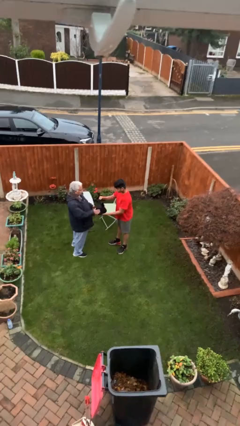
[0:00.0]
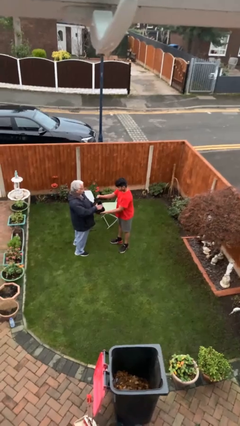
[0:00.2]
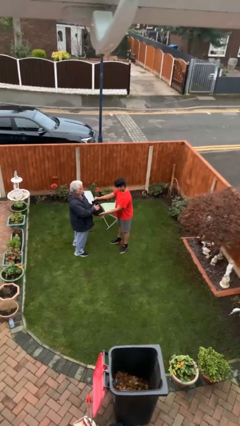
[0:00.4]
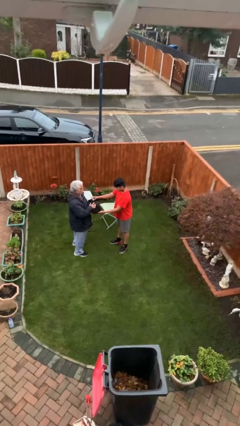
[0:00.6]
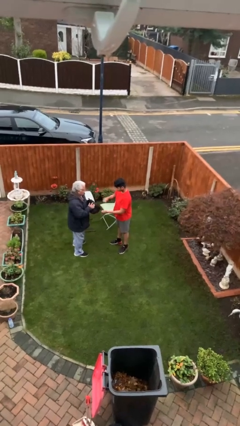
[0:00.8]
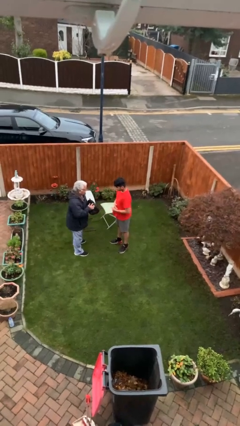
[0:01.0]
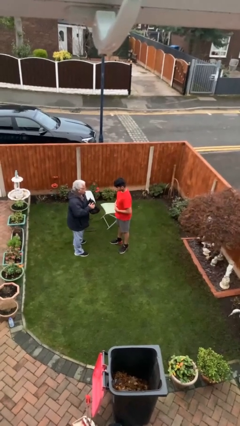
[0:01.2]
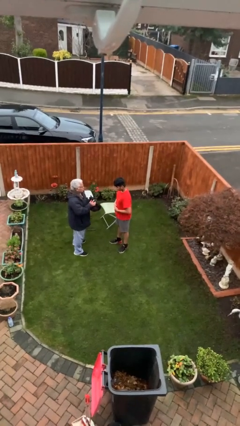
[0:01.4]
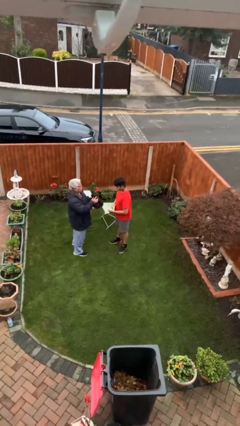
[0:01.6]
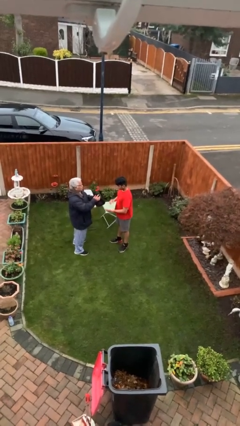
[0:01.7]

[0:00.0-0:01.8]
person transfers object to person

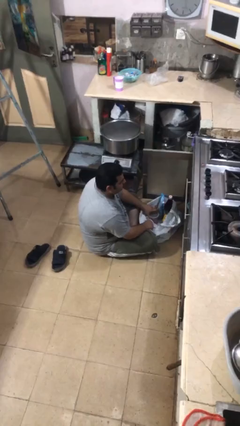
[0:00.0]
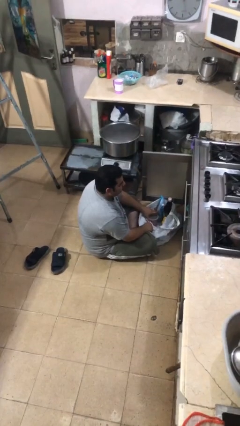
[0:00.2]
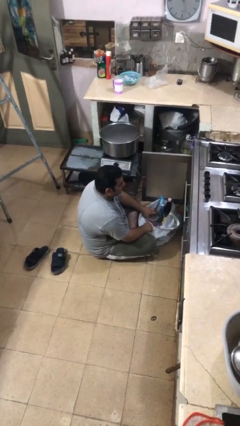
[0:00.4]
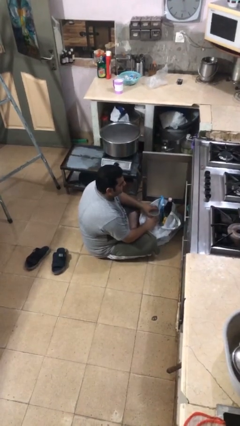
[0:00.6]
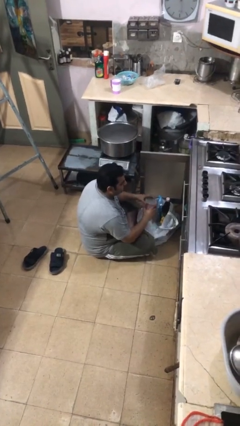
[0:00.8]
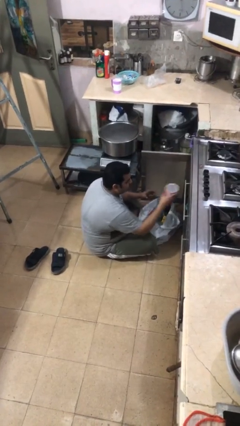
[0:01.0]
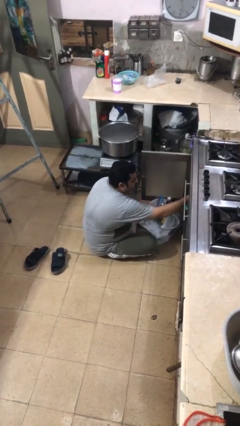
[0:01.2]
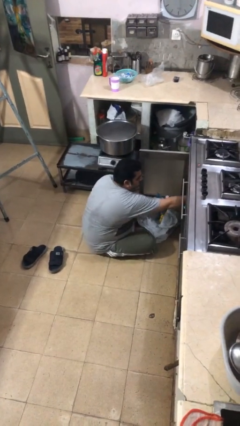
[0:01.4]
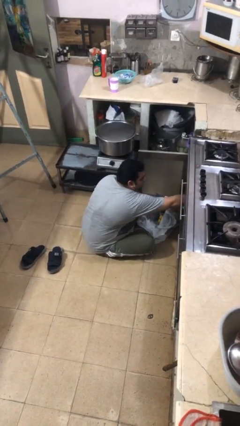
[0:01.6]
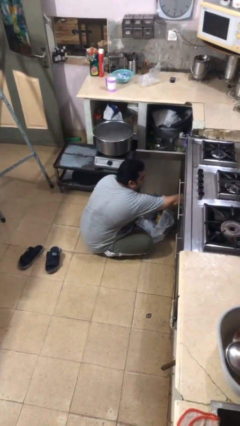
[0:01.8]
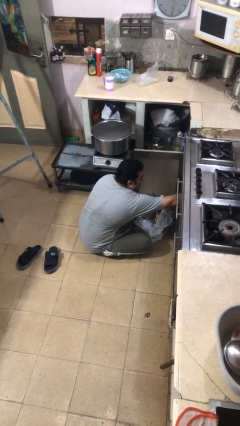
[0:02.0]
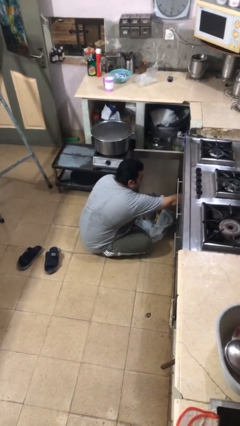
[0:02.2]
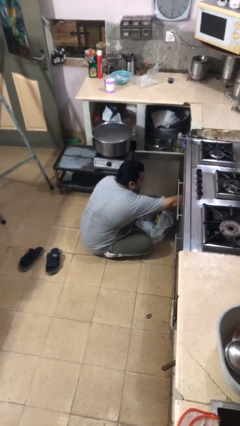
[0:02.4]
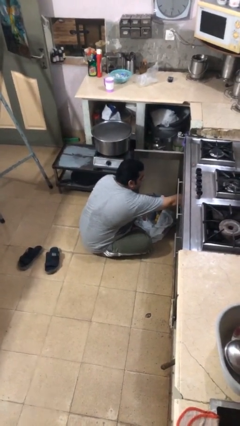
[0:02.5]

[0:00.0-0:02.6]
person loads groceries into cabinet

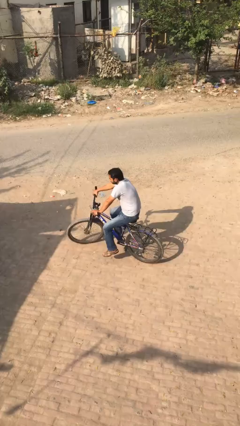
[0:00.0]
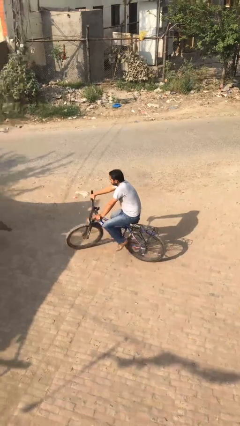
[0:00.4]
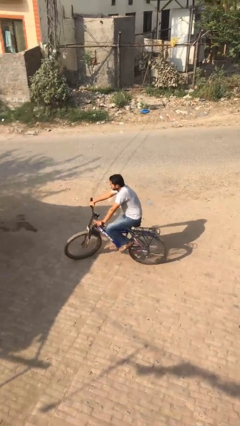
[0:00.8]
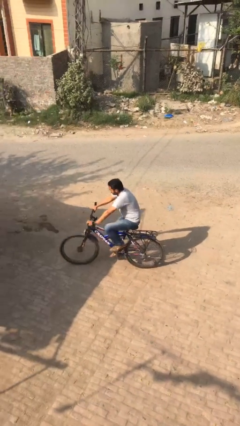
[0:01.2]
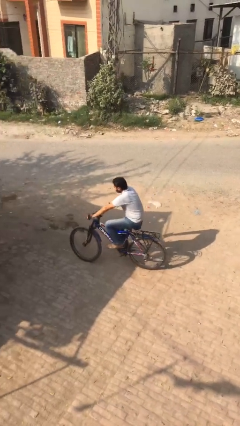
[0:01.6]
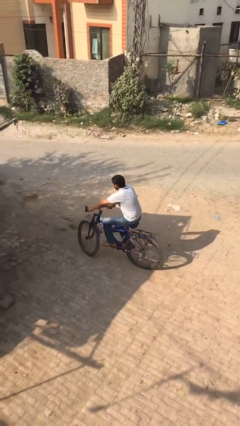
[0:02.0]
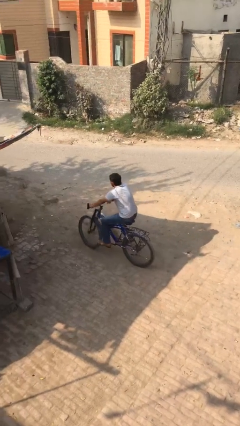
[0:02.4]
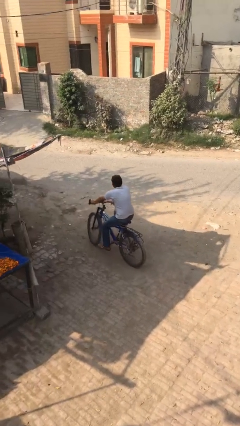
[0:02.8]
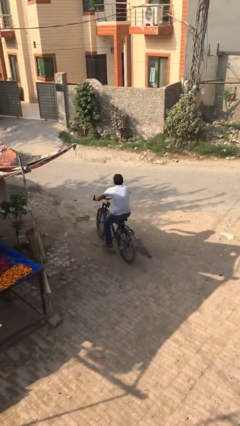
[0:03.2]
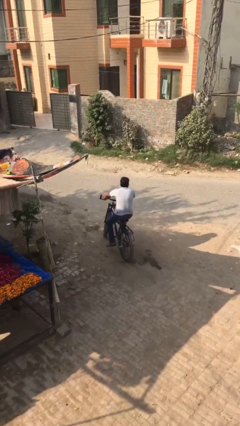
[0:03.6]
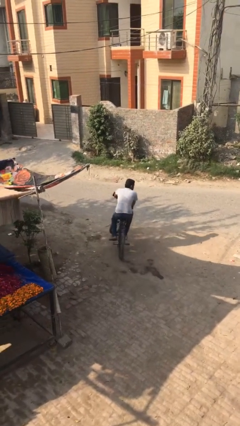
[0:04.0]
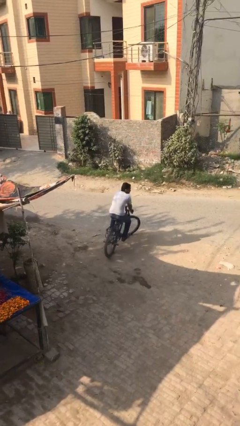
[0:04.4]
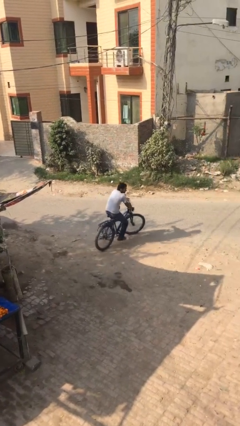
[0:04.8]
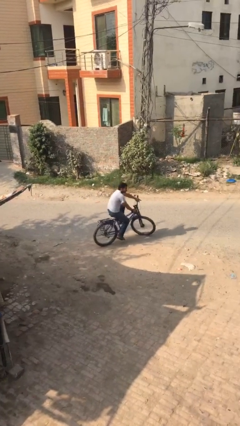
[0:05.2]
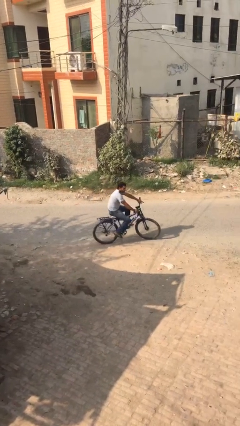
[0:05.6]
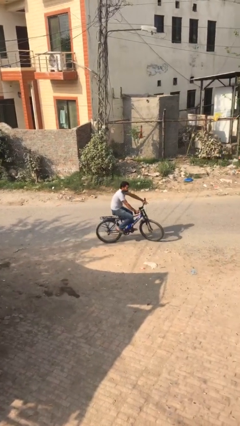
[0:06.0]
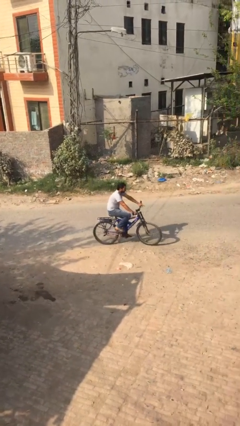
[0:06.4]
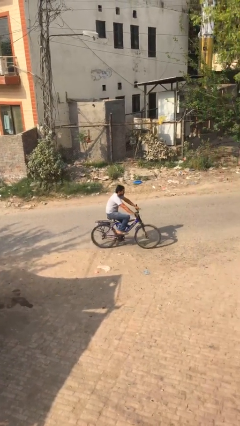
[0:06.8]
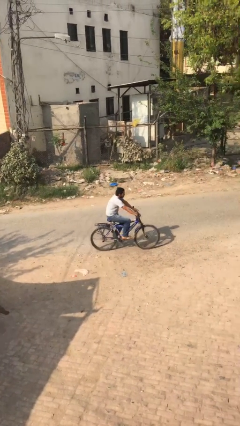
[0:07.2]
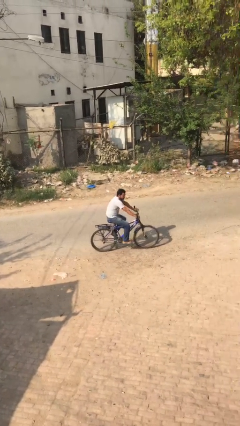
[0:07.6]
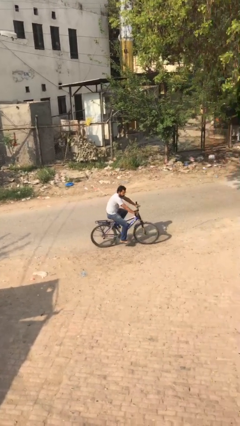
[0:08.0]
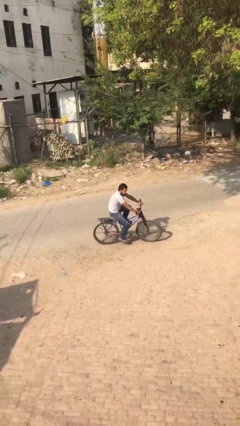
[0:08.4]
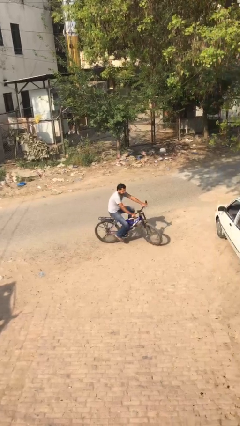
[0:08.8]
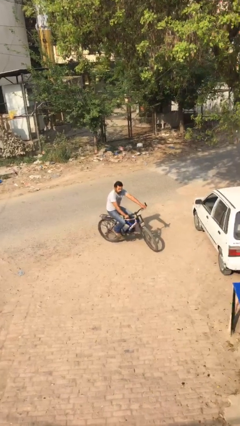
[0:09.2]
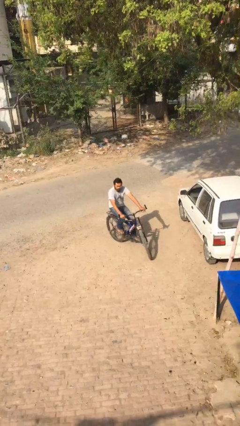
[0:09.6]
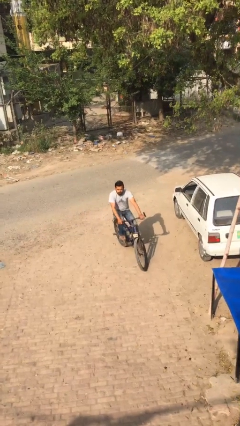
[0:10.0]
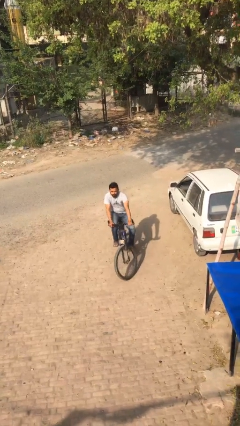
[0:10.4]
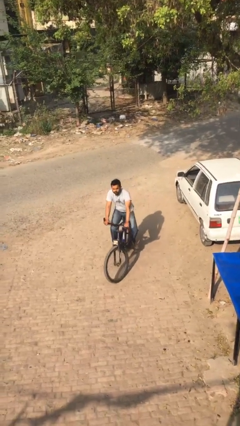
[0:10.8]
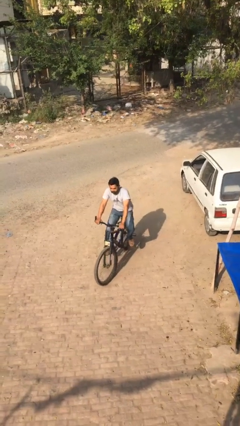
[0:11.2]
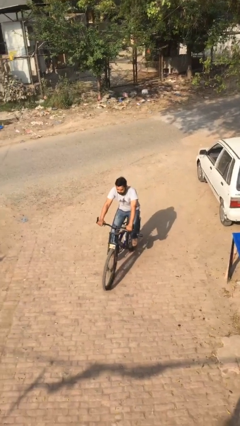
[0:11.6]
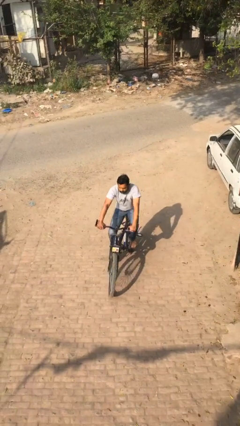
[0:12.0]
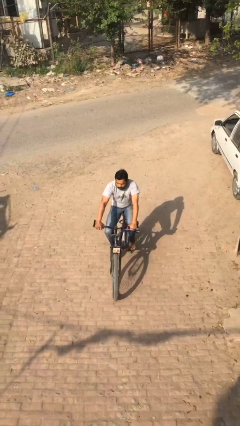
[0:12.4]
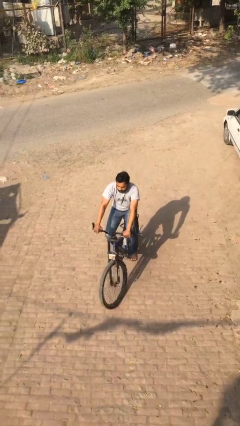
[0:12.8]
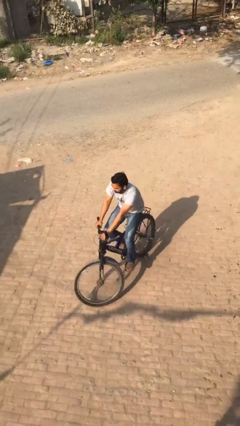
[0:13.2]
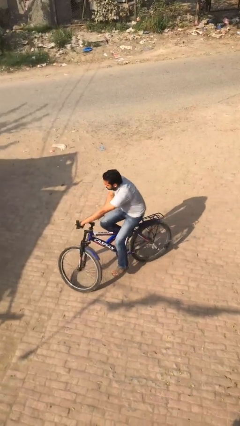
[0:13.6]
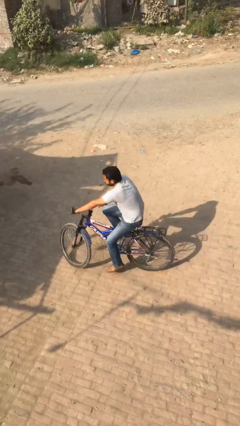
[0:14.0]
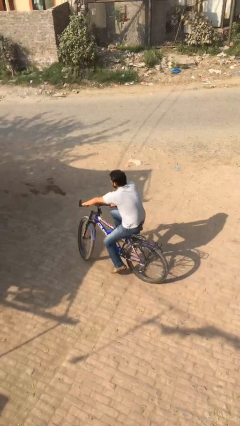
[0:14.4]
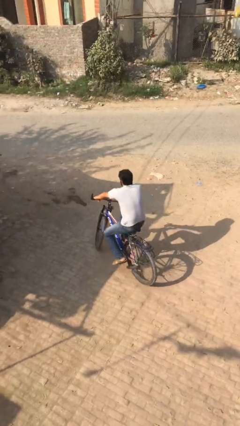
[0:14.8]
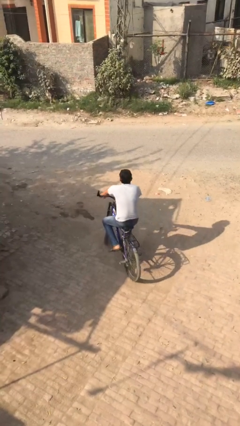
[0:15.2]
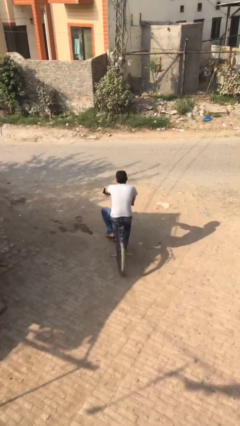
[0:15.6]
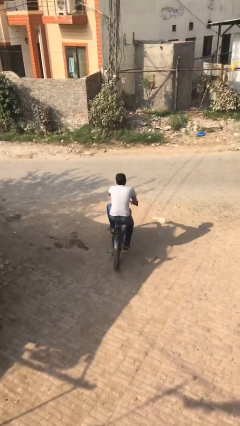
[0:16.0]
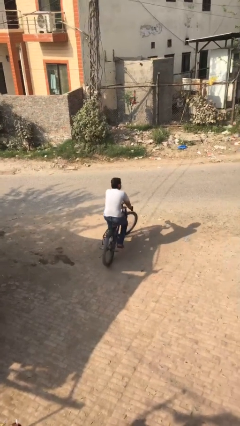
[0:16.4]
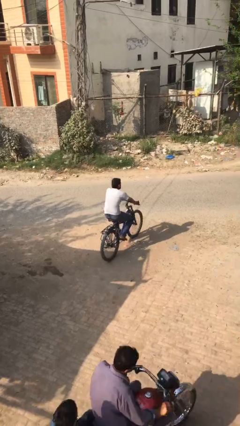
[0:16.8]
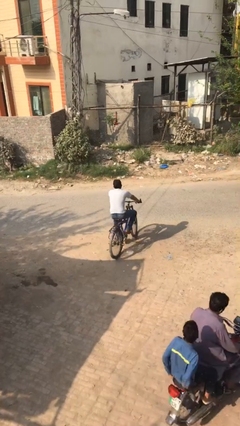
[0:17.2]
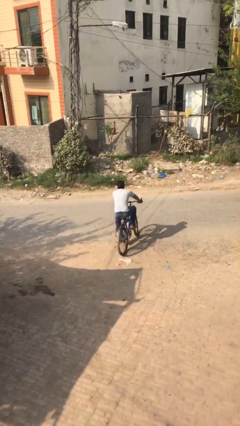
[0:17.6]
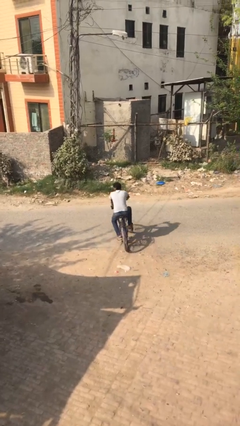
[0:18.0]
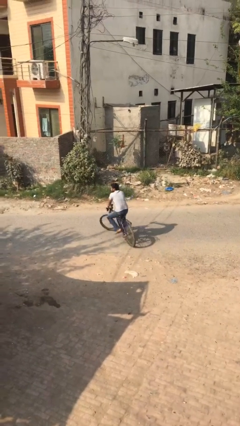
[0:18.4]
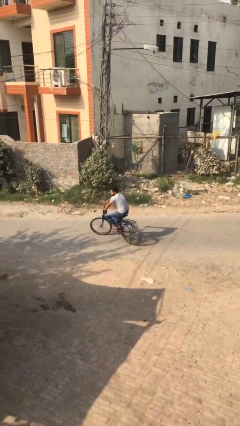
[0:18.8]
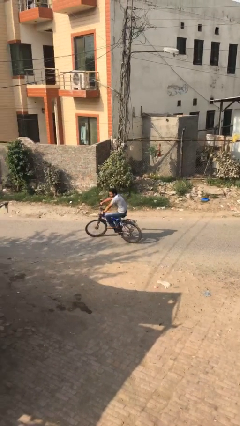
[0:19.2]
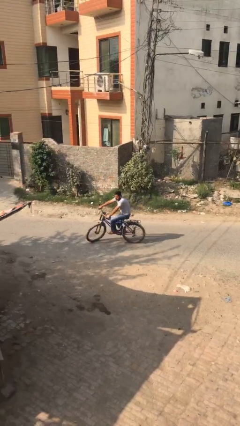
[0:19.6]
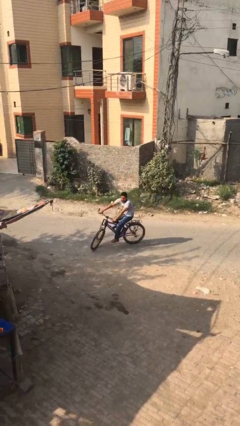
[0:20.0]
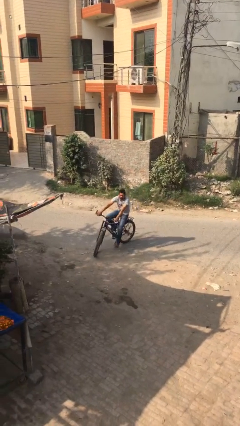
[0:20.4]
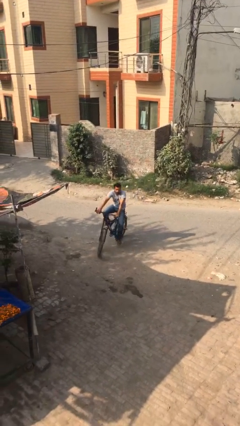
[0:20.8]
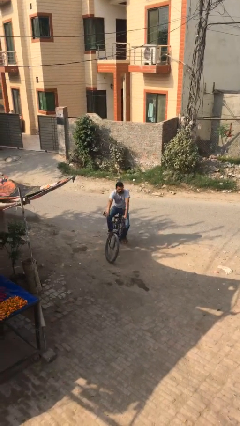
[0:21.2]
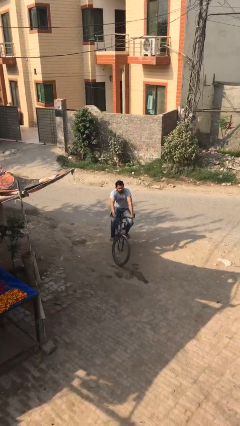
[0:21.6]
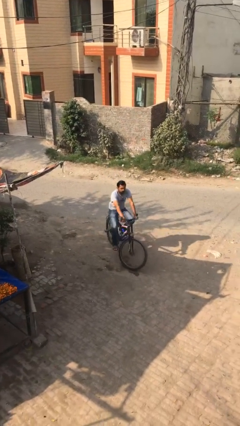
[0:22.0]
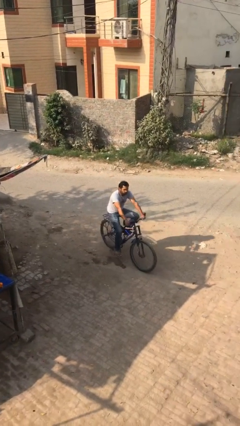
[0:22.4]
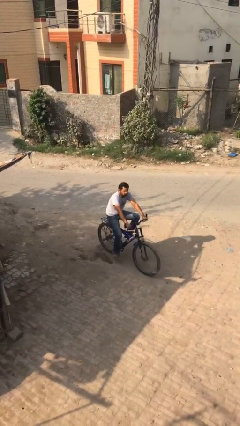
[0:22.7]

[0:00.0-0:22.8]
person rides bicycle

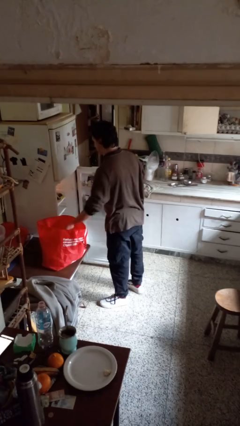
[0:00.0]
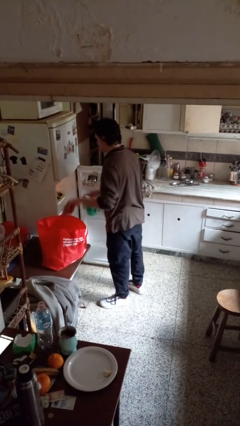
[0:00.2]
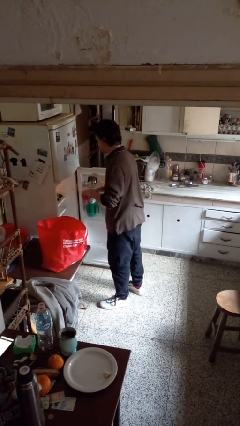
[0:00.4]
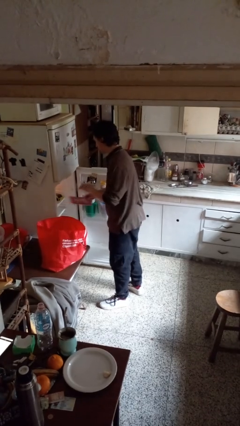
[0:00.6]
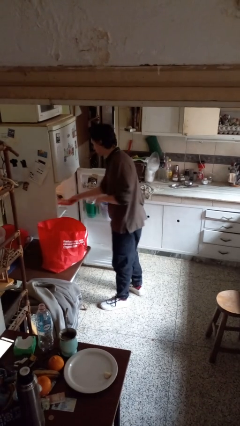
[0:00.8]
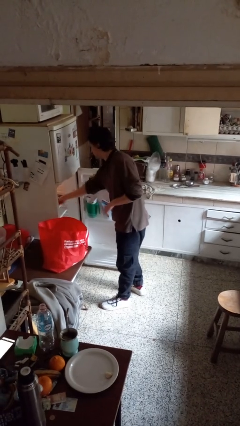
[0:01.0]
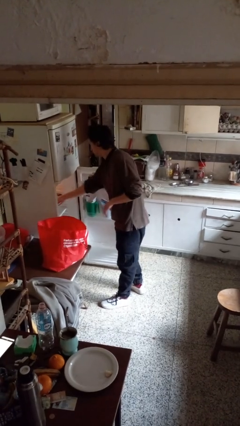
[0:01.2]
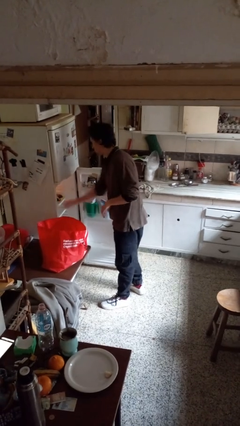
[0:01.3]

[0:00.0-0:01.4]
person loads groceries into refrigerator

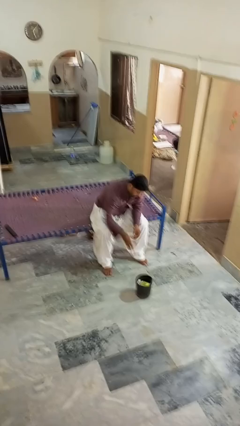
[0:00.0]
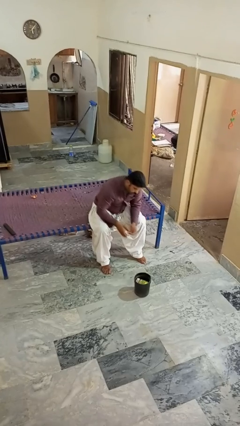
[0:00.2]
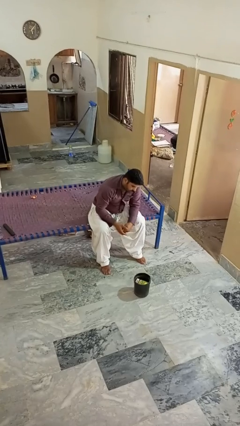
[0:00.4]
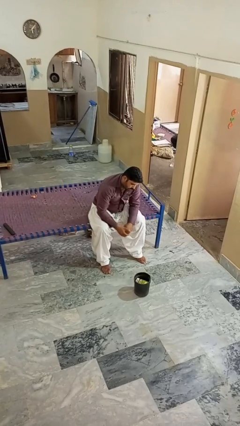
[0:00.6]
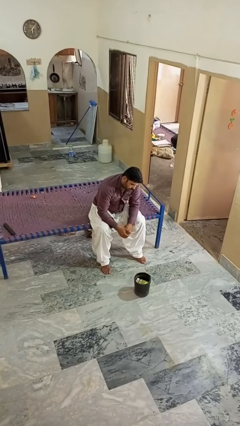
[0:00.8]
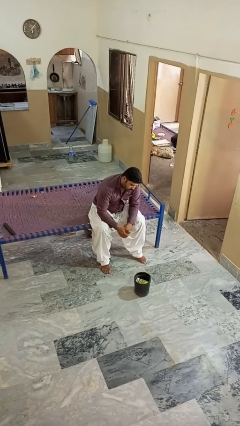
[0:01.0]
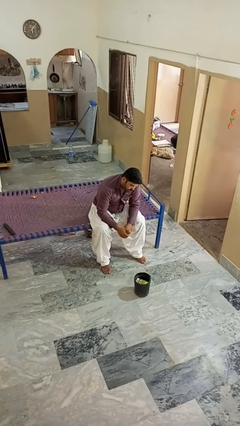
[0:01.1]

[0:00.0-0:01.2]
person puts object into basket
